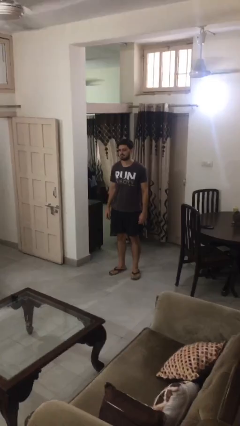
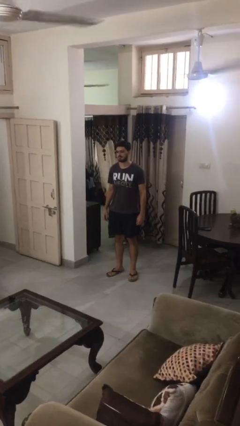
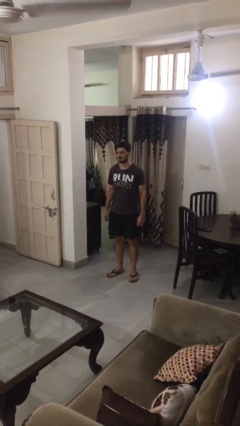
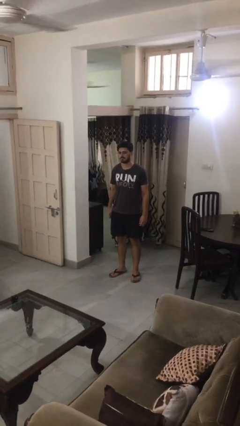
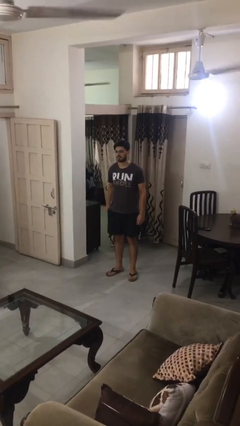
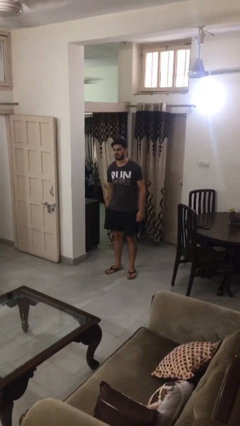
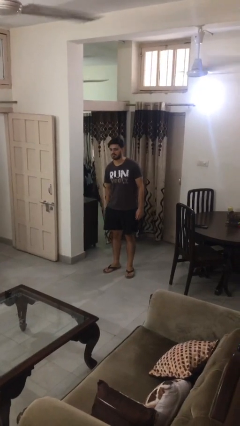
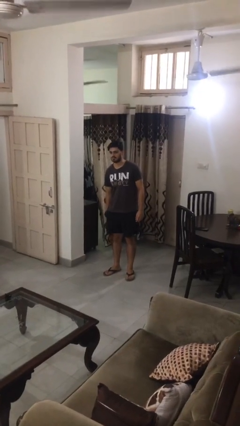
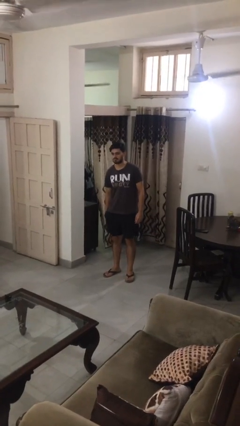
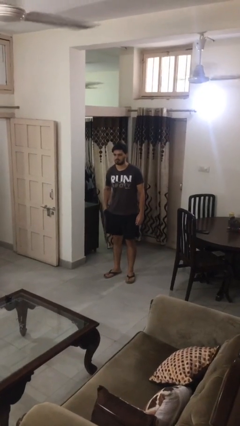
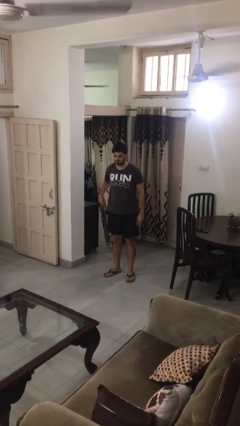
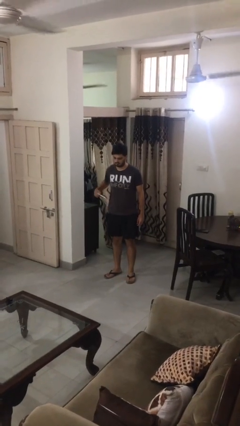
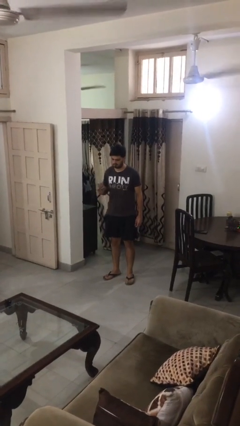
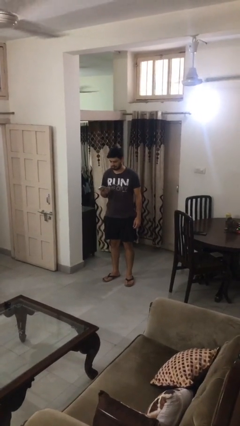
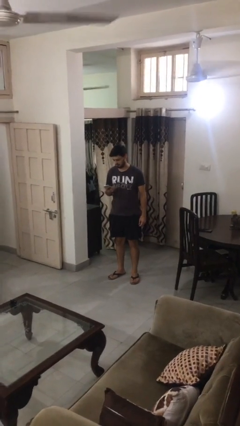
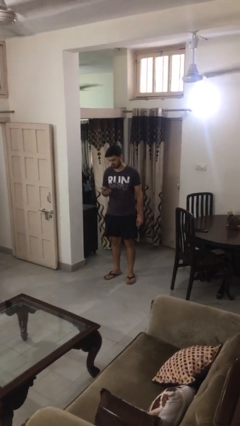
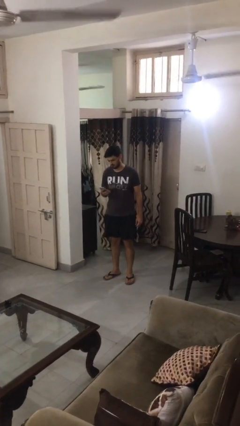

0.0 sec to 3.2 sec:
person takes phone from pocket

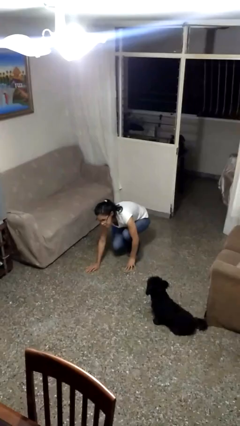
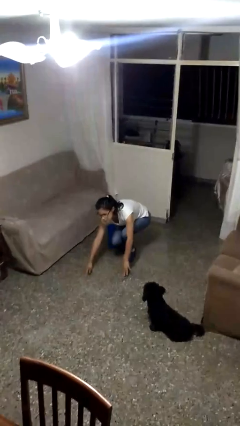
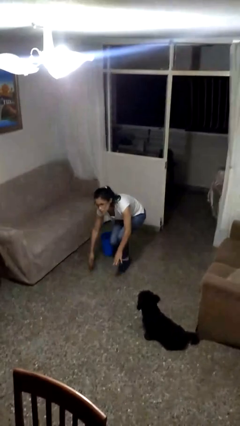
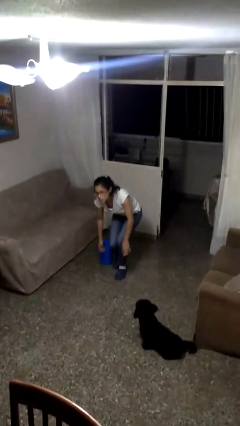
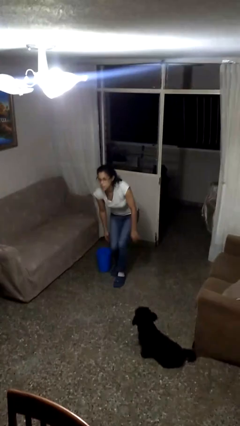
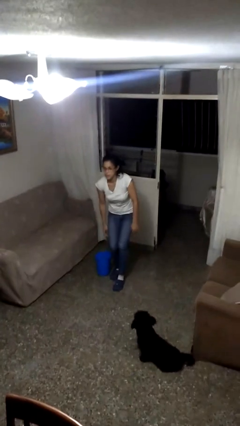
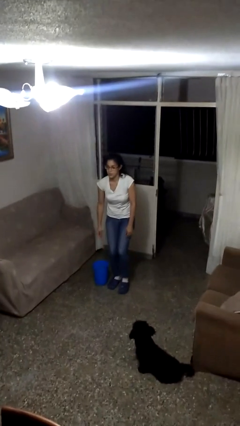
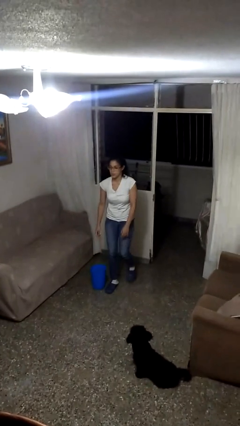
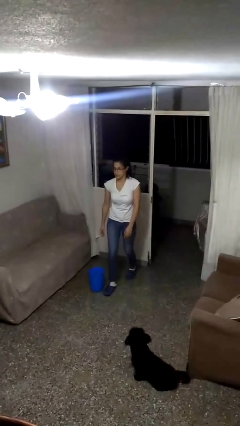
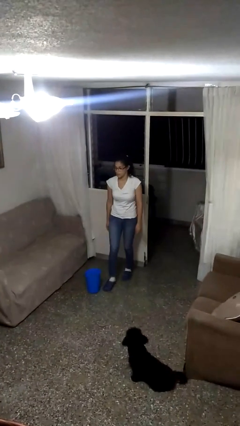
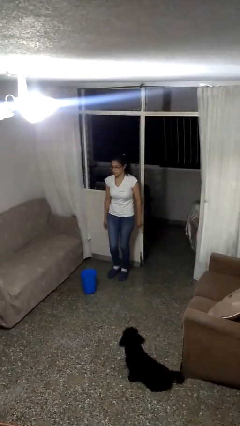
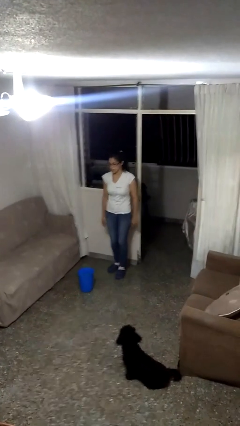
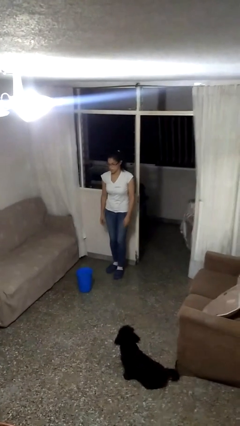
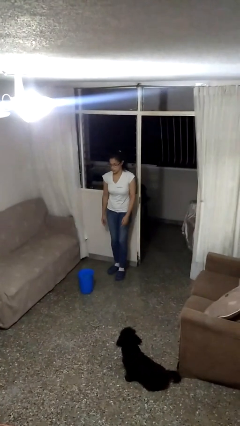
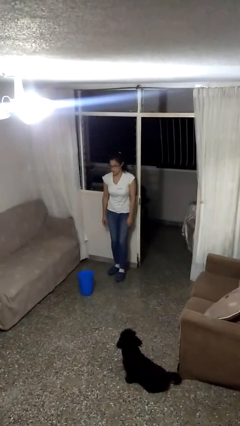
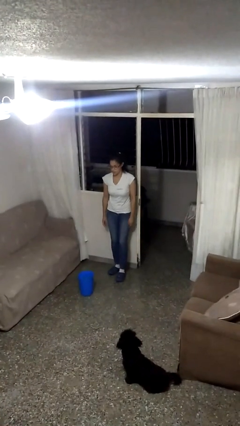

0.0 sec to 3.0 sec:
person stands up from floor

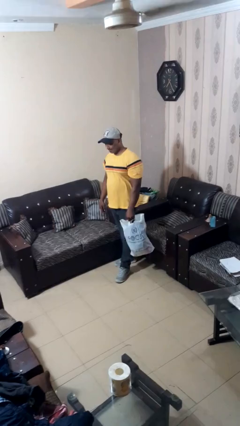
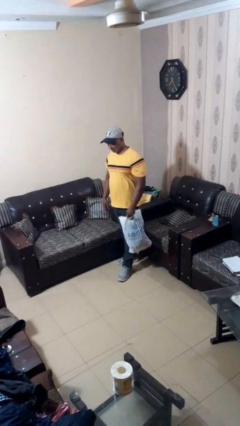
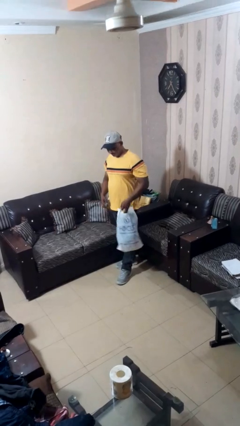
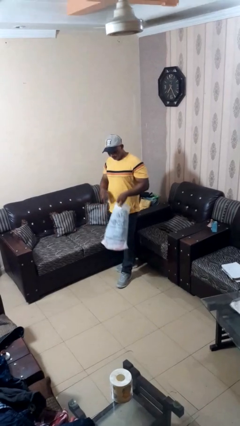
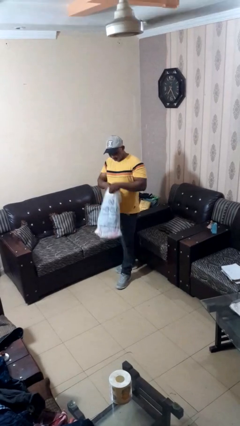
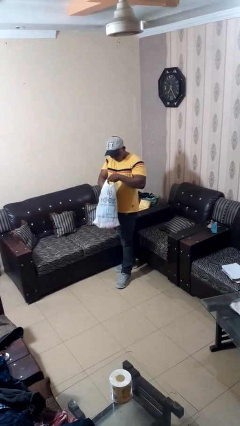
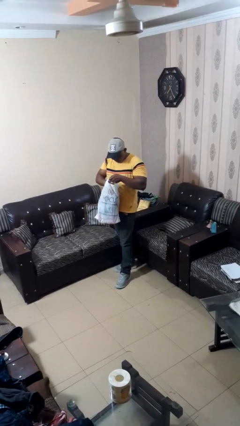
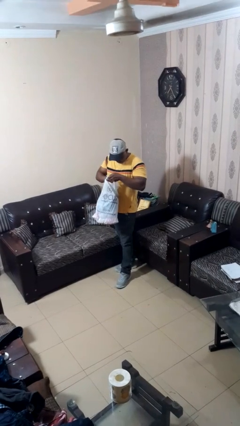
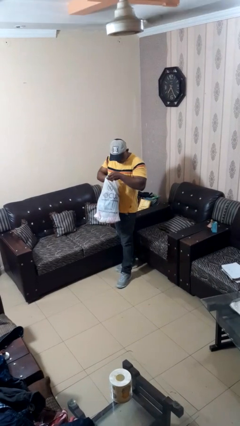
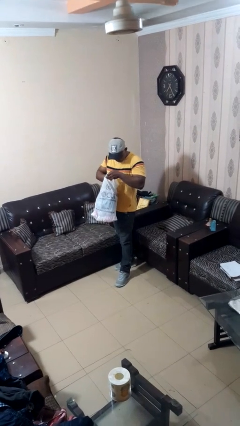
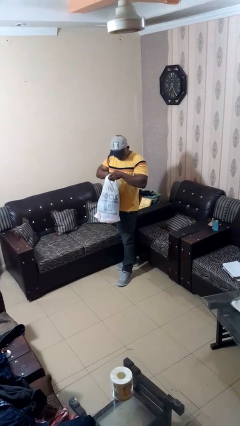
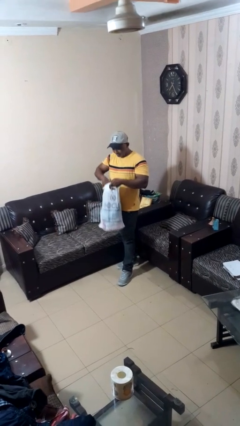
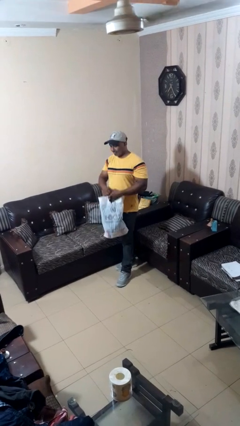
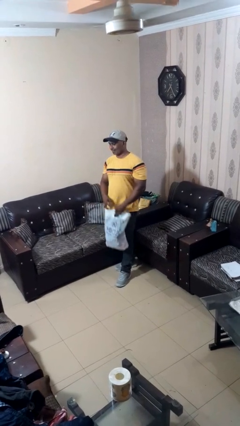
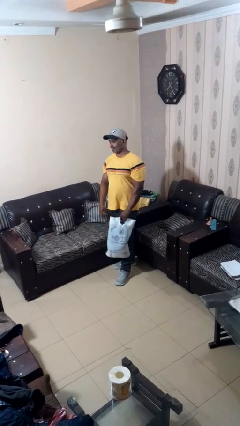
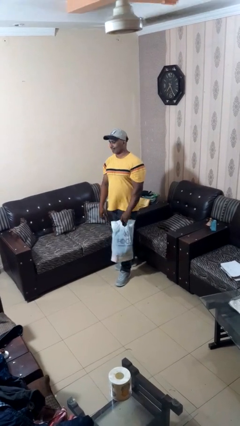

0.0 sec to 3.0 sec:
person searches in bag

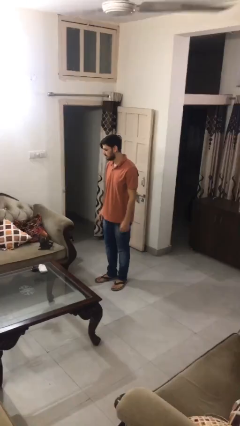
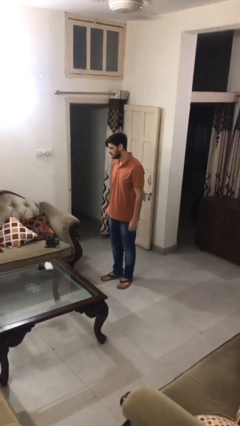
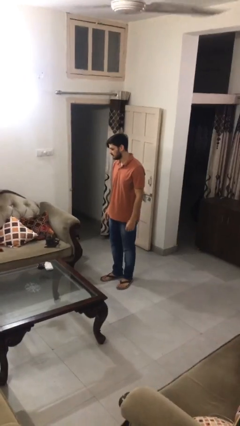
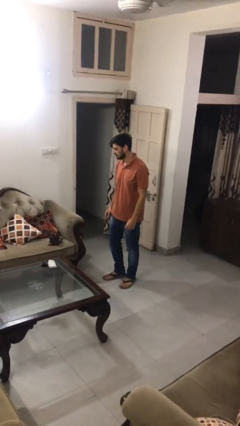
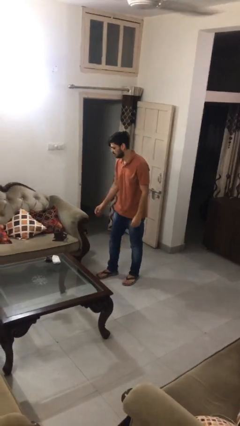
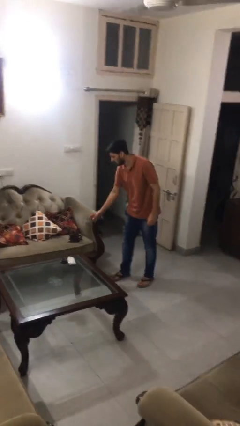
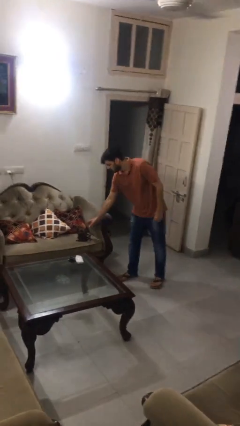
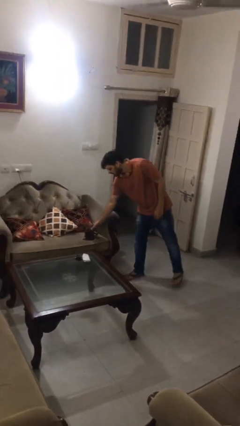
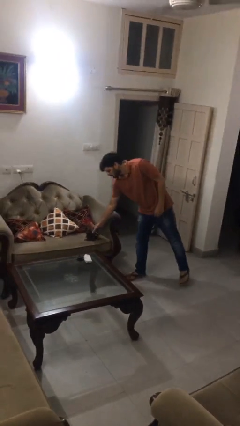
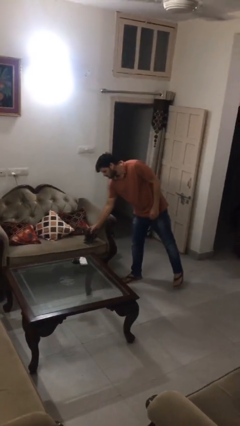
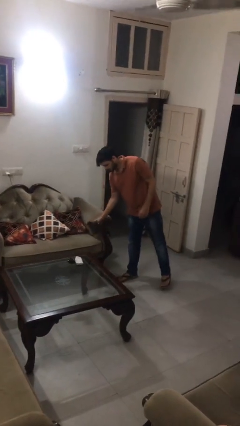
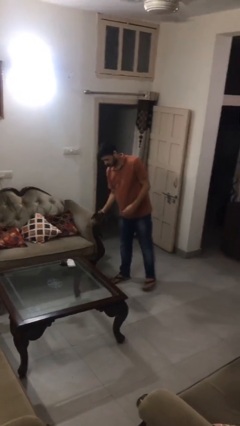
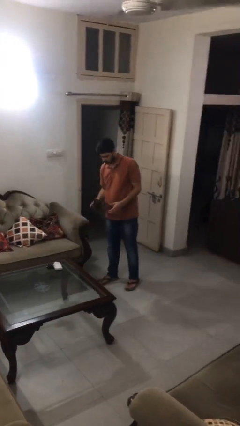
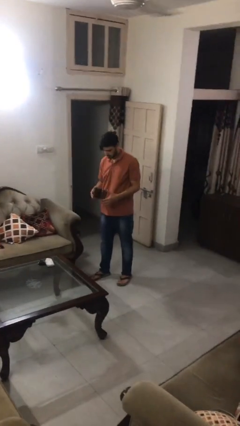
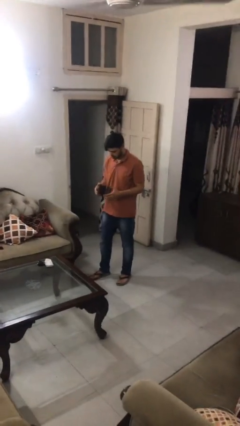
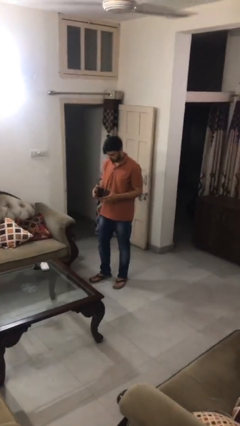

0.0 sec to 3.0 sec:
person picks up object from couch

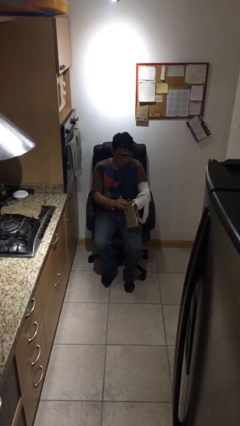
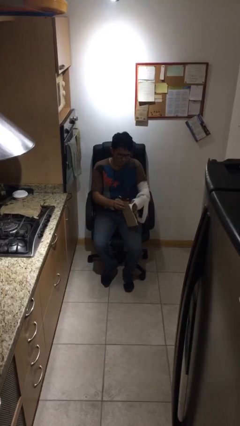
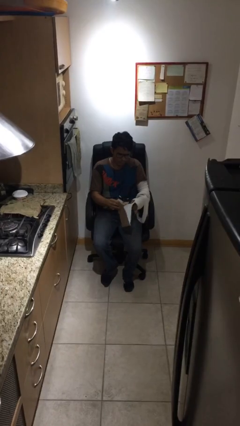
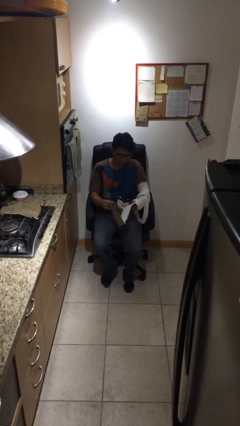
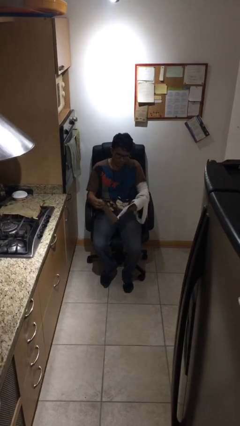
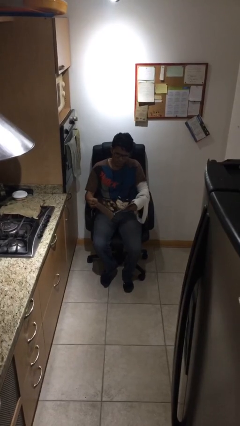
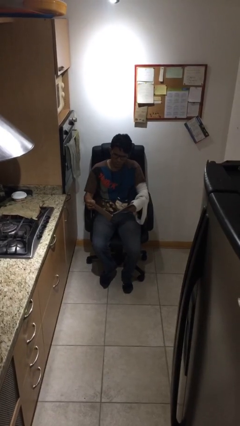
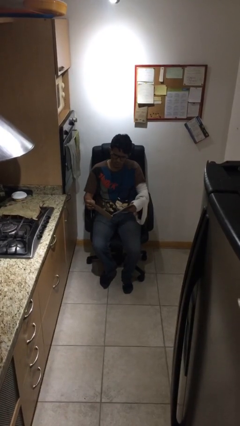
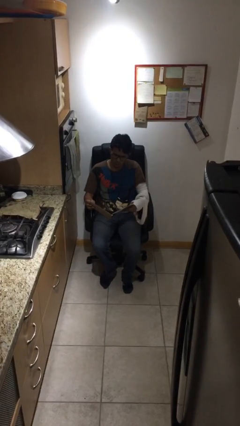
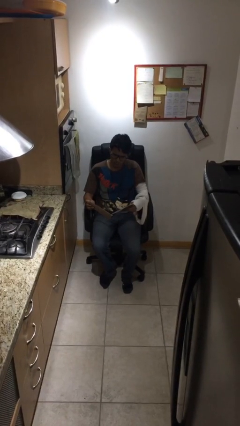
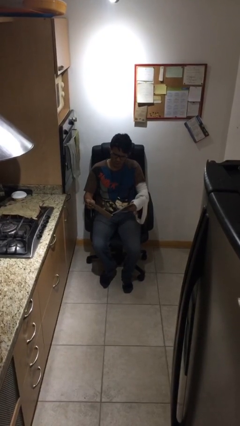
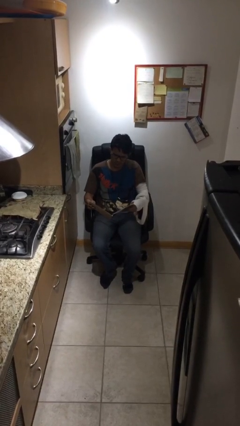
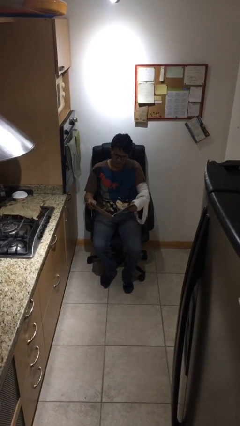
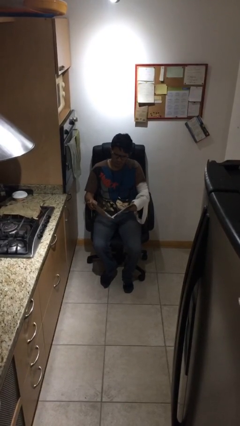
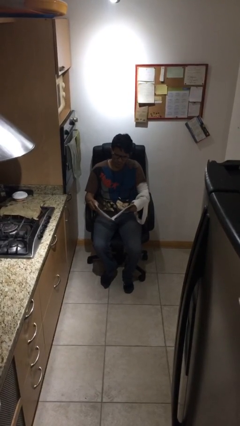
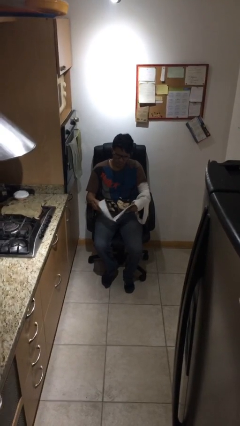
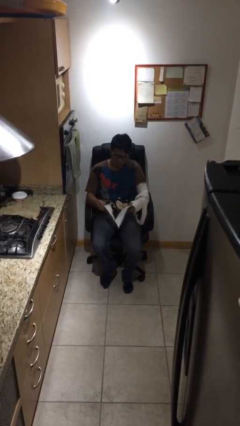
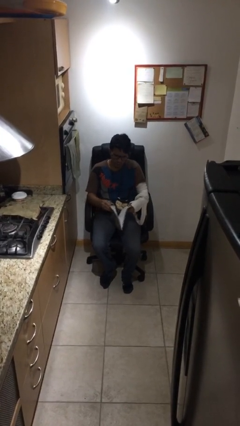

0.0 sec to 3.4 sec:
person reads document

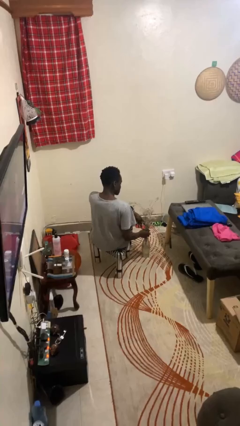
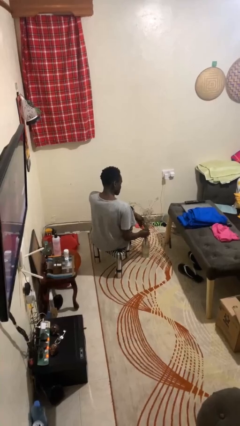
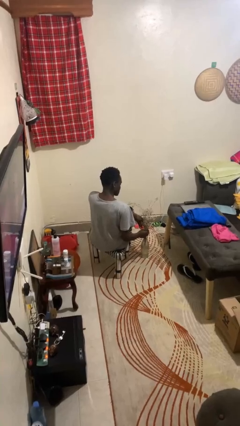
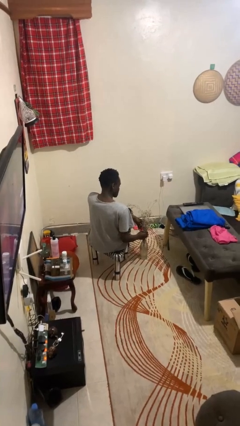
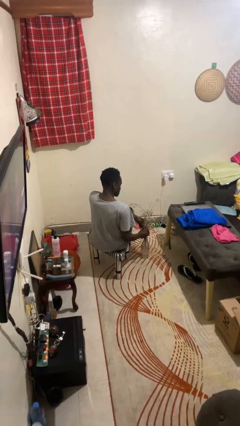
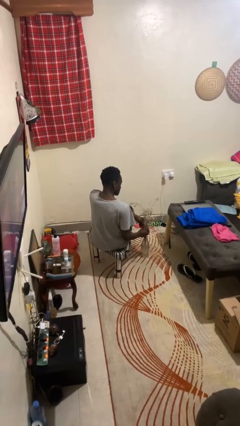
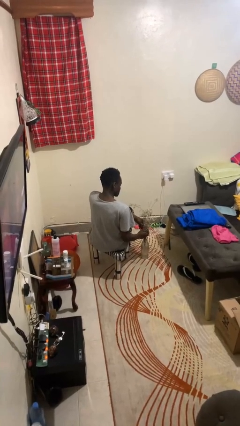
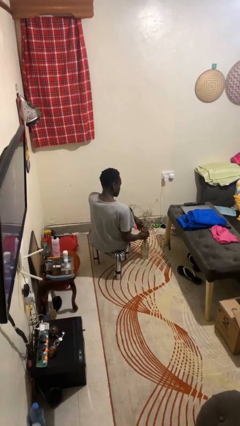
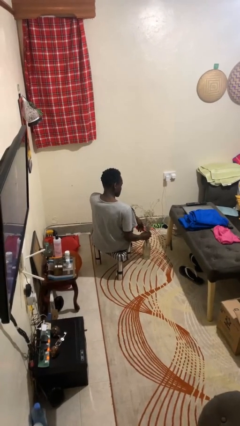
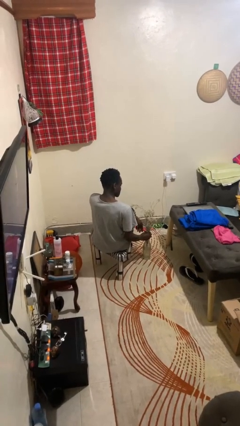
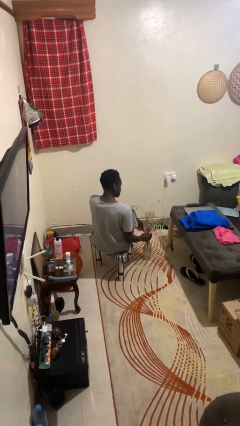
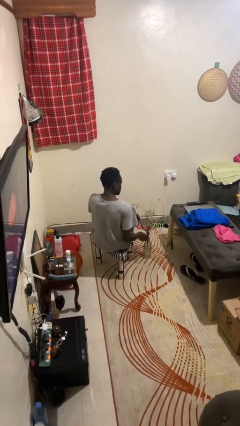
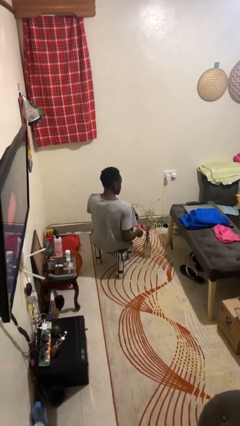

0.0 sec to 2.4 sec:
person arranges flowers in vase
